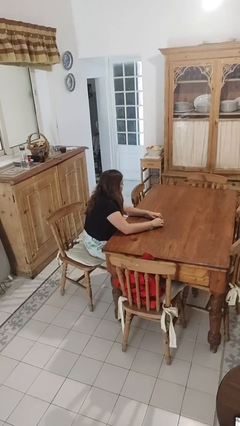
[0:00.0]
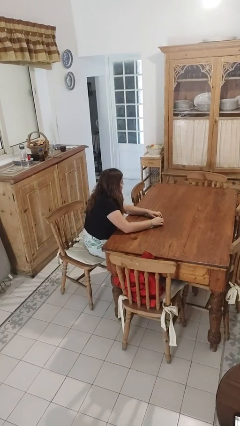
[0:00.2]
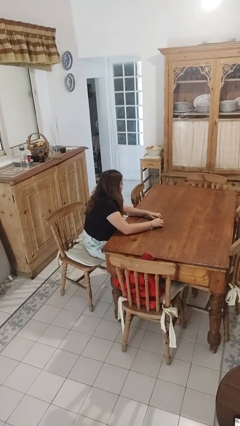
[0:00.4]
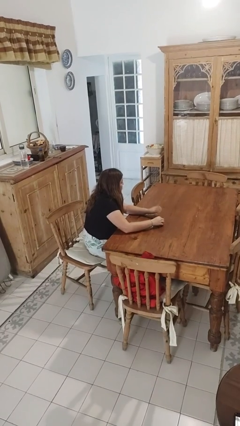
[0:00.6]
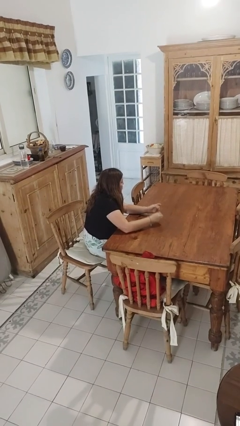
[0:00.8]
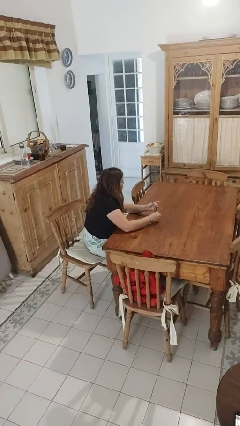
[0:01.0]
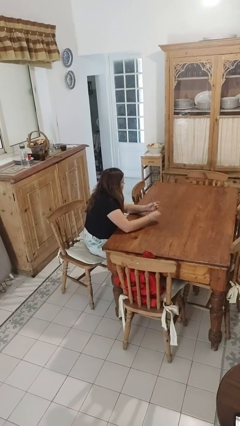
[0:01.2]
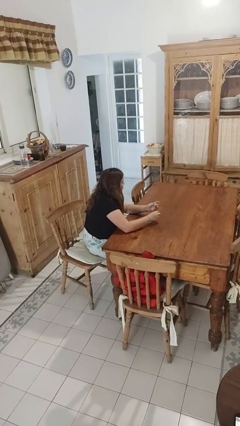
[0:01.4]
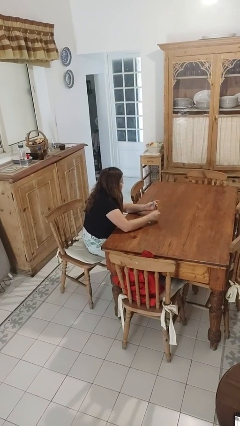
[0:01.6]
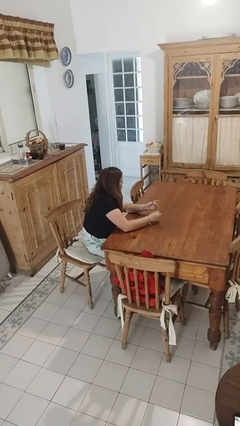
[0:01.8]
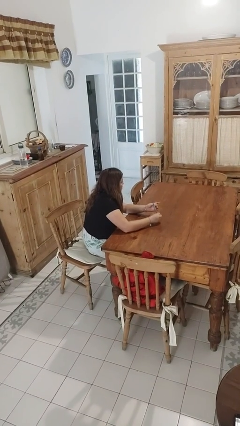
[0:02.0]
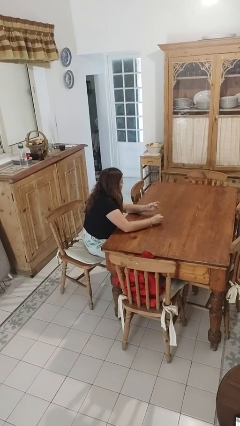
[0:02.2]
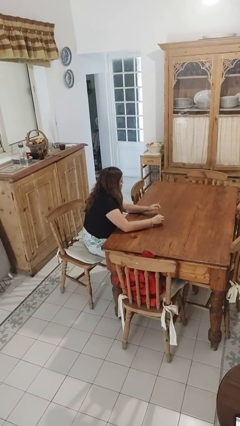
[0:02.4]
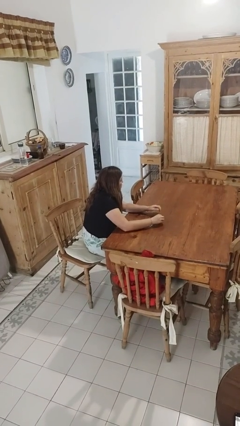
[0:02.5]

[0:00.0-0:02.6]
person files fingernails

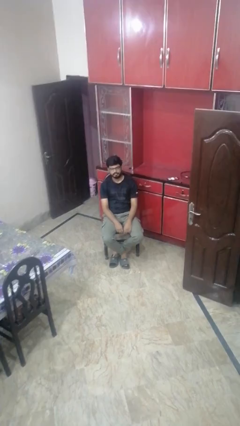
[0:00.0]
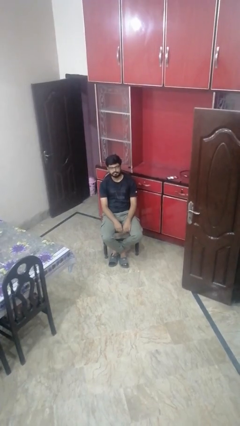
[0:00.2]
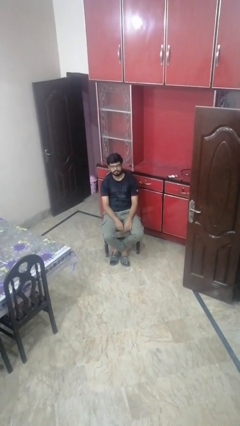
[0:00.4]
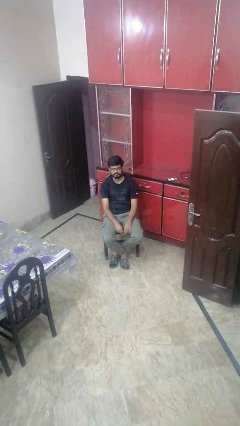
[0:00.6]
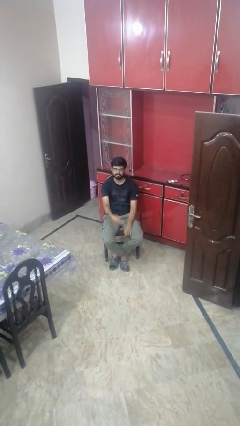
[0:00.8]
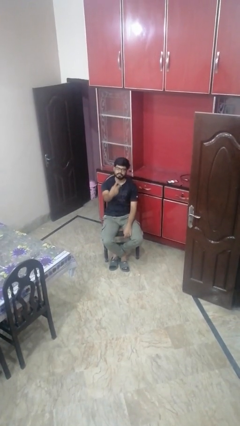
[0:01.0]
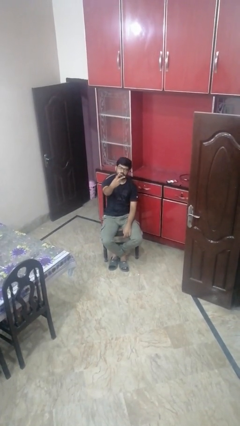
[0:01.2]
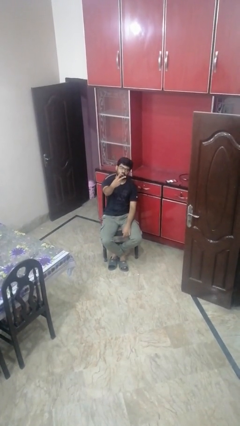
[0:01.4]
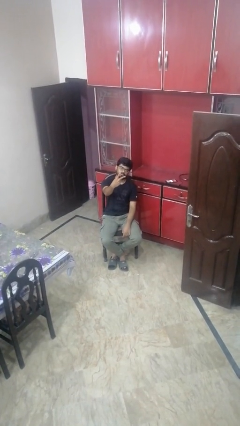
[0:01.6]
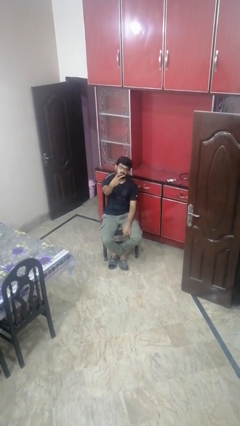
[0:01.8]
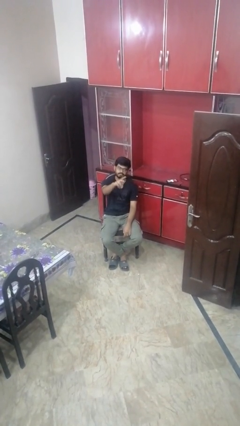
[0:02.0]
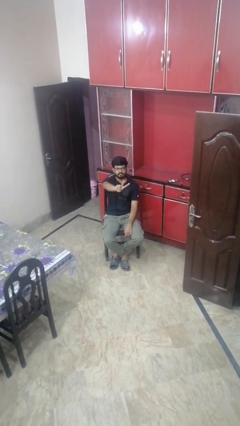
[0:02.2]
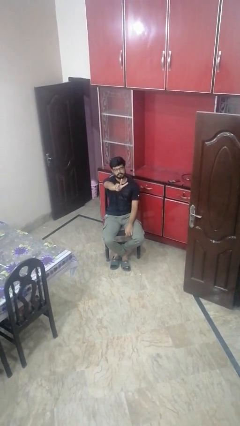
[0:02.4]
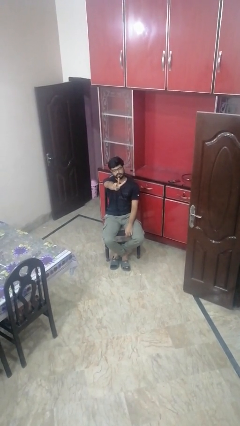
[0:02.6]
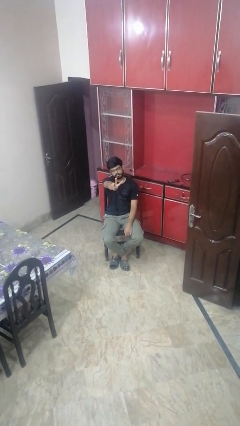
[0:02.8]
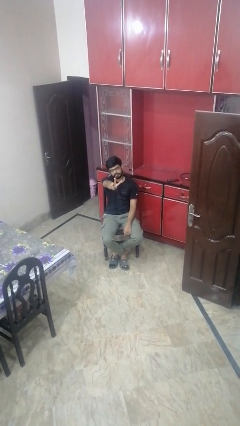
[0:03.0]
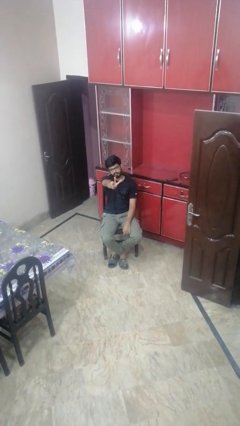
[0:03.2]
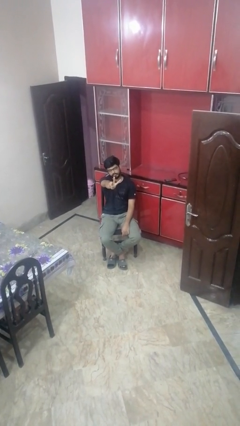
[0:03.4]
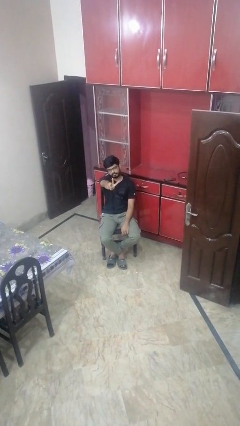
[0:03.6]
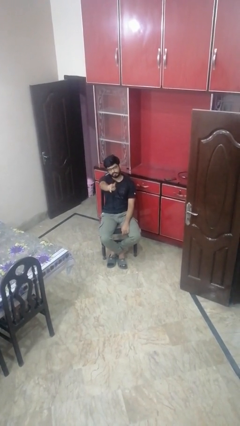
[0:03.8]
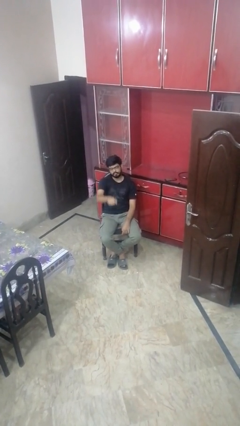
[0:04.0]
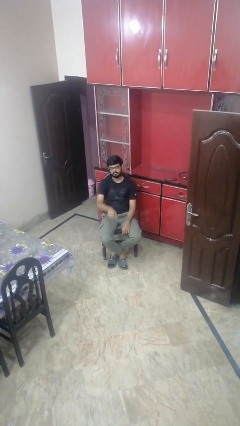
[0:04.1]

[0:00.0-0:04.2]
person gestures peace

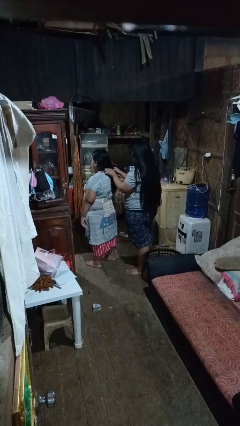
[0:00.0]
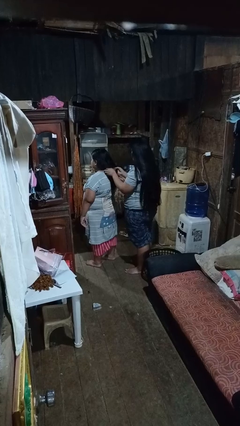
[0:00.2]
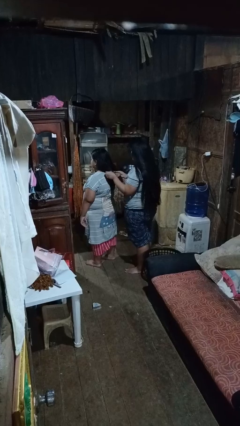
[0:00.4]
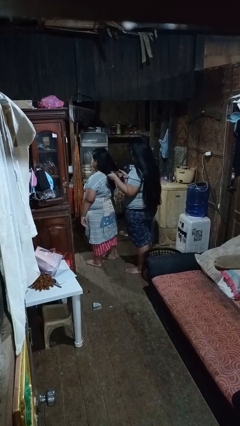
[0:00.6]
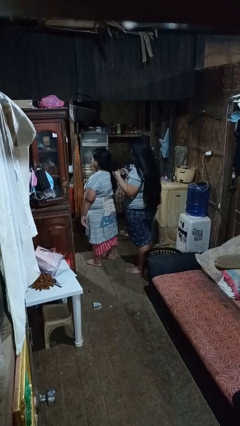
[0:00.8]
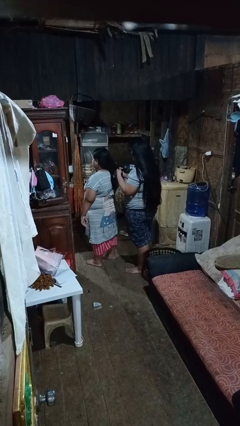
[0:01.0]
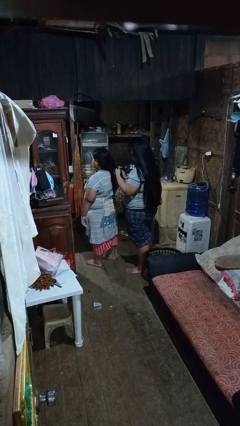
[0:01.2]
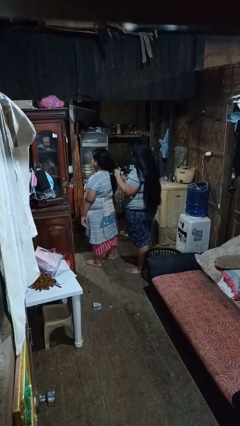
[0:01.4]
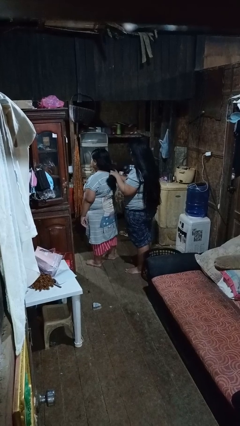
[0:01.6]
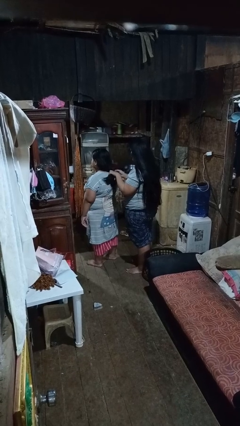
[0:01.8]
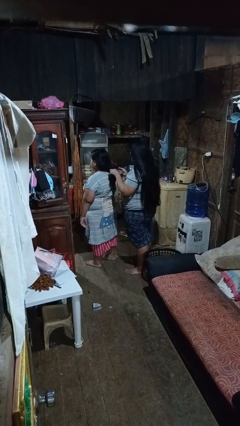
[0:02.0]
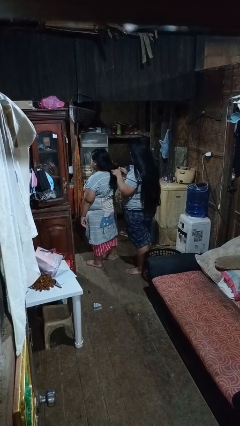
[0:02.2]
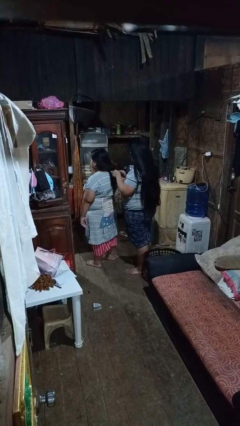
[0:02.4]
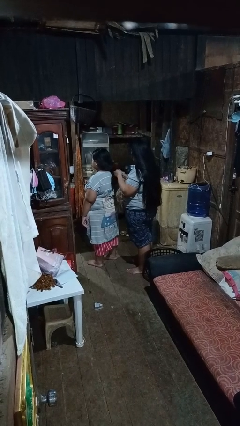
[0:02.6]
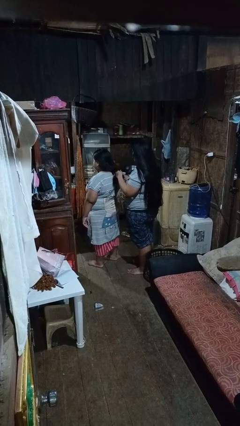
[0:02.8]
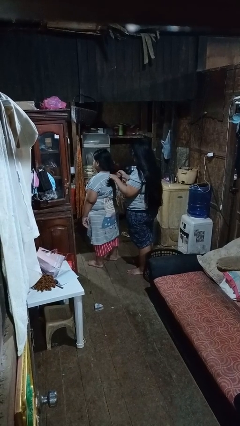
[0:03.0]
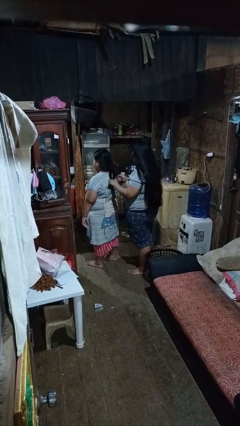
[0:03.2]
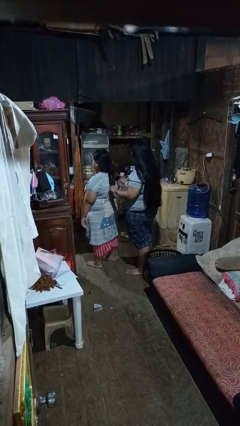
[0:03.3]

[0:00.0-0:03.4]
person braids hair of person

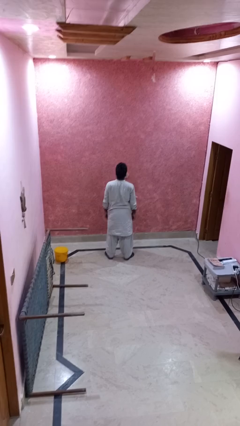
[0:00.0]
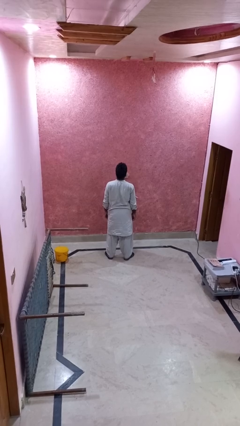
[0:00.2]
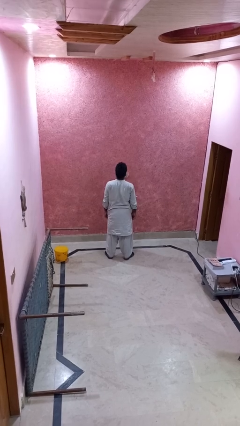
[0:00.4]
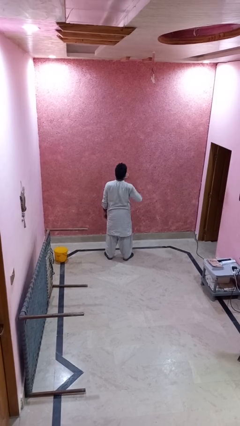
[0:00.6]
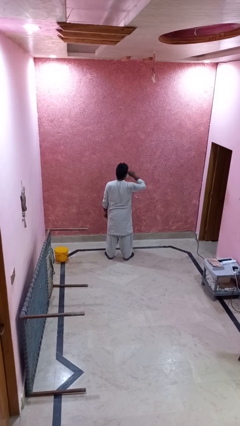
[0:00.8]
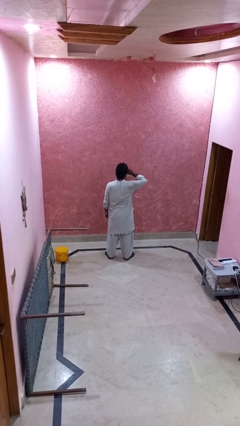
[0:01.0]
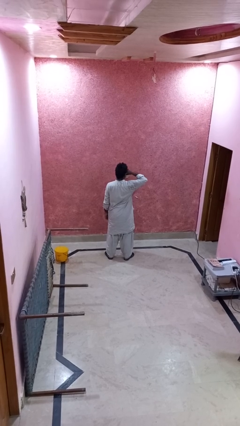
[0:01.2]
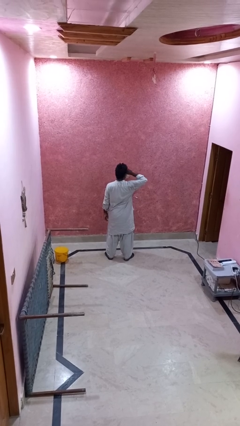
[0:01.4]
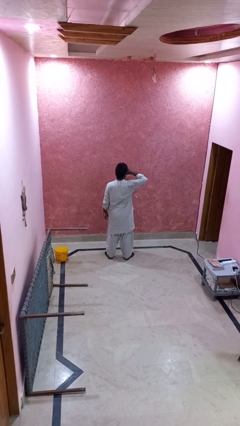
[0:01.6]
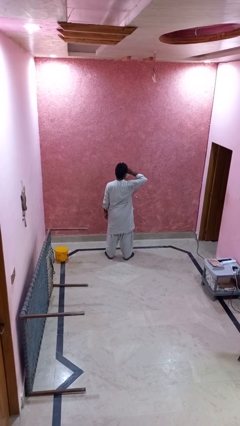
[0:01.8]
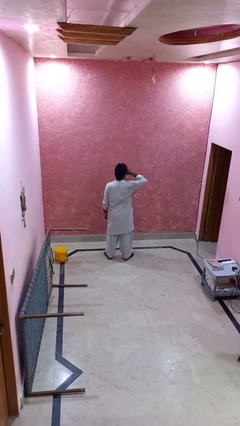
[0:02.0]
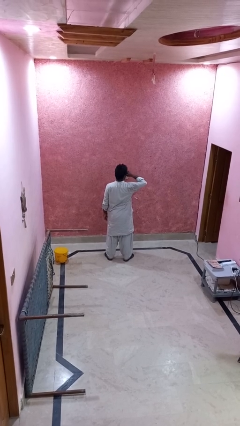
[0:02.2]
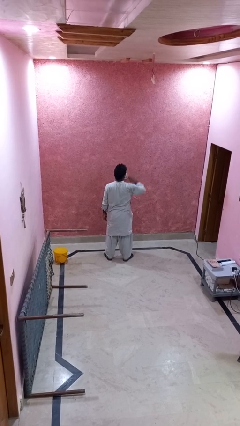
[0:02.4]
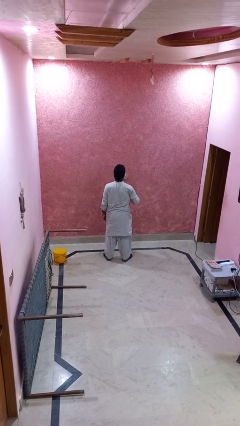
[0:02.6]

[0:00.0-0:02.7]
person rubs eyes

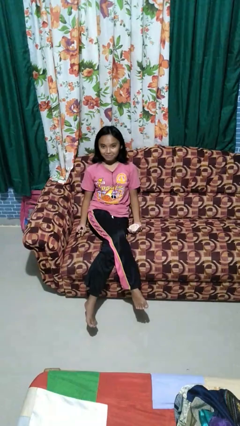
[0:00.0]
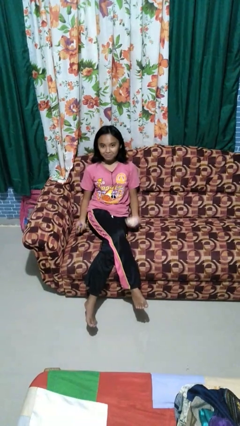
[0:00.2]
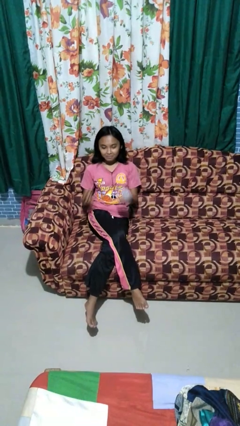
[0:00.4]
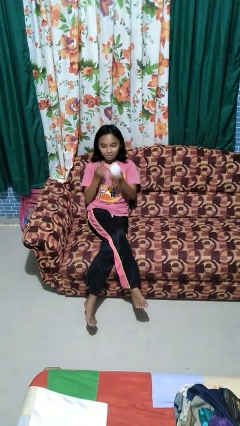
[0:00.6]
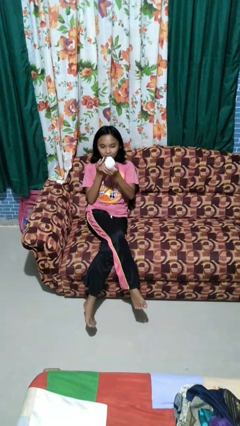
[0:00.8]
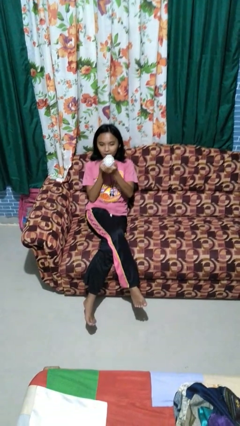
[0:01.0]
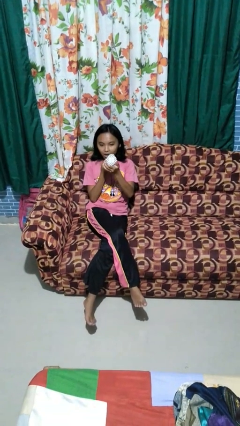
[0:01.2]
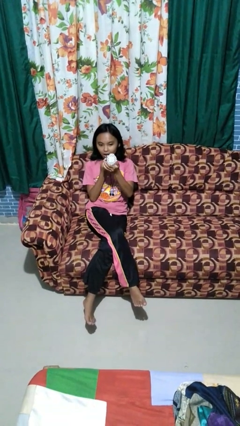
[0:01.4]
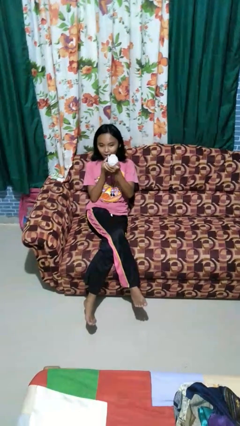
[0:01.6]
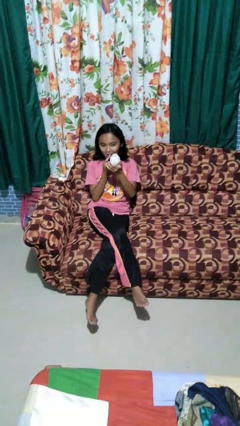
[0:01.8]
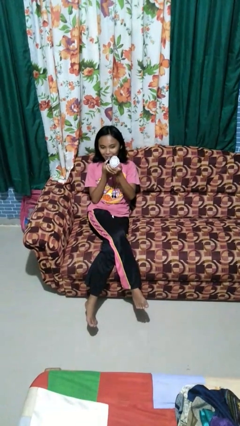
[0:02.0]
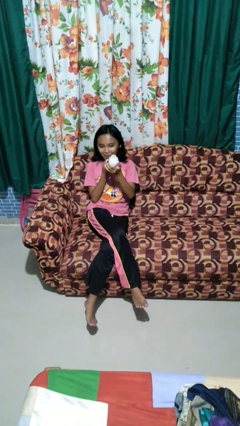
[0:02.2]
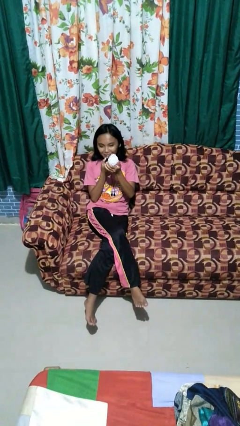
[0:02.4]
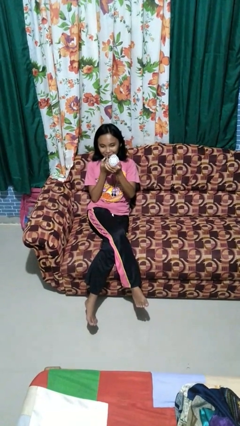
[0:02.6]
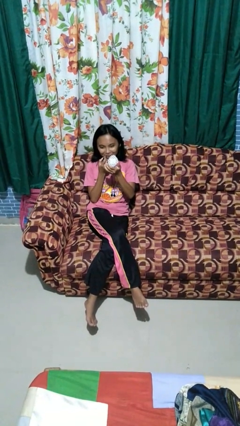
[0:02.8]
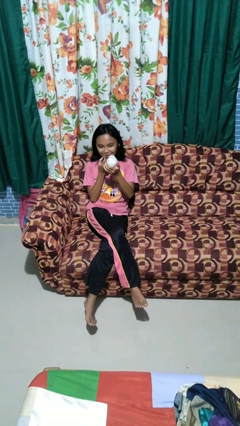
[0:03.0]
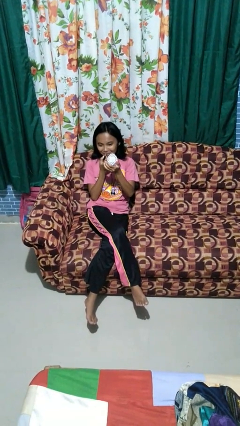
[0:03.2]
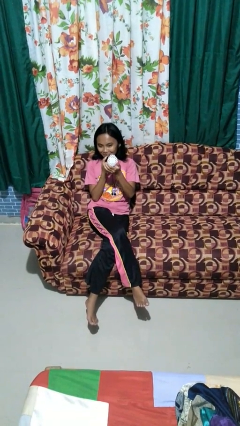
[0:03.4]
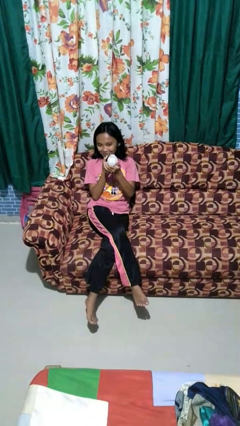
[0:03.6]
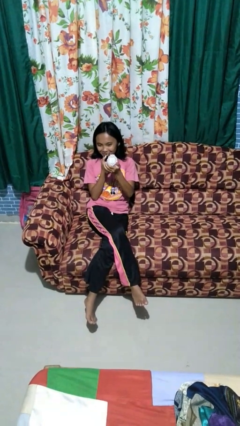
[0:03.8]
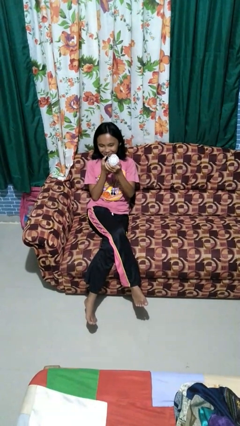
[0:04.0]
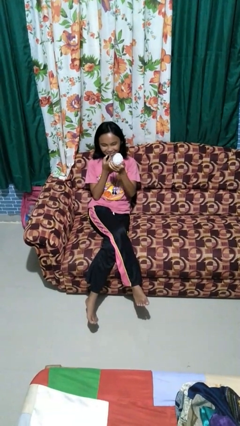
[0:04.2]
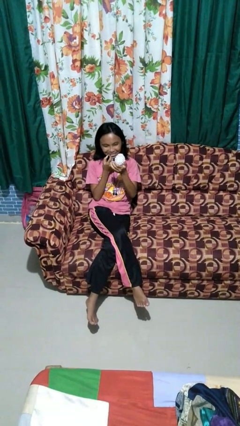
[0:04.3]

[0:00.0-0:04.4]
person applies lip makeup

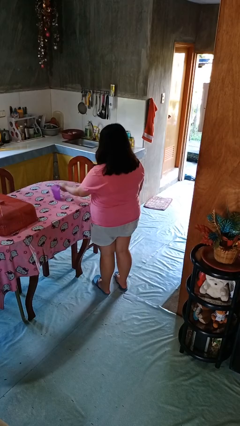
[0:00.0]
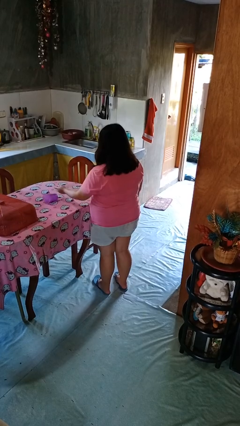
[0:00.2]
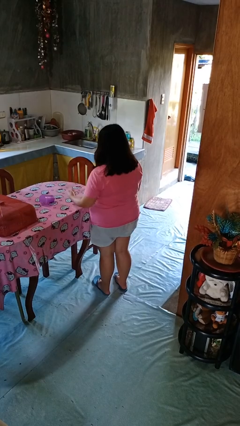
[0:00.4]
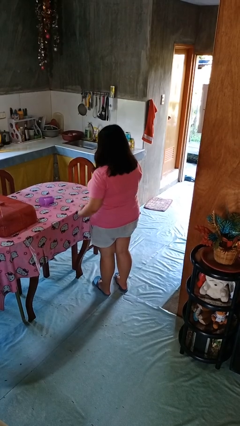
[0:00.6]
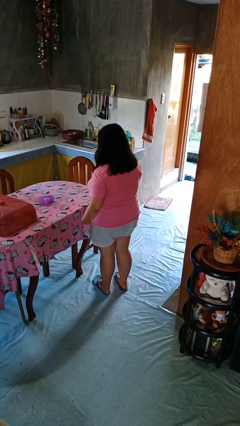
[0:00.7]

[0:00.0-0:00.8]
person knocks over glass
